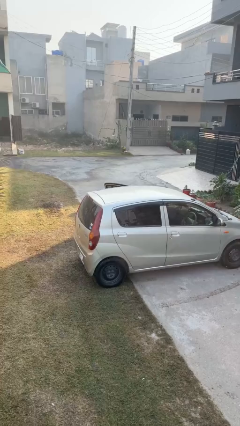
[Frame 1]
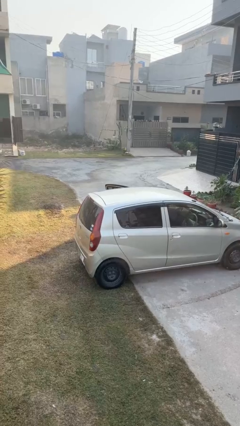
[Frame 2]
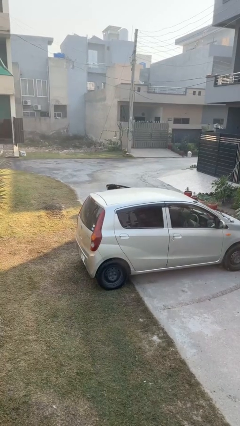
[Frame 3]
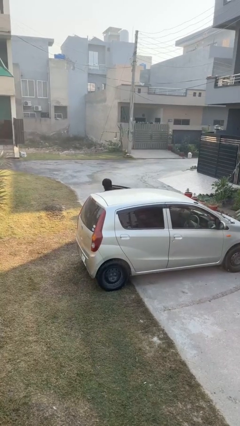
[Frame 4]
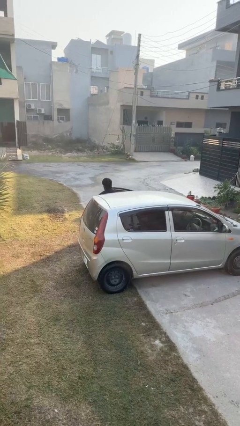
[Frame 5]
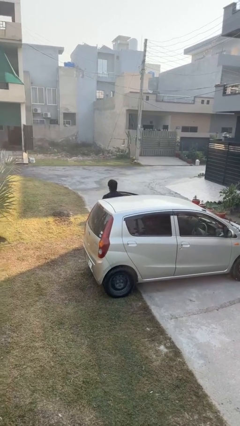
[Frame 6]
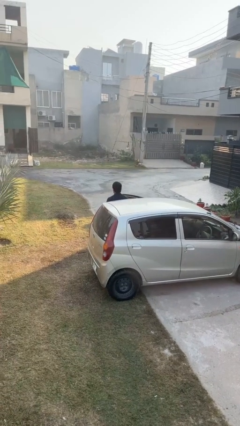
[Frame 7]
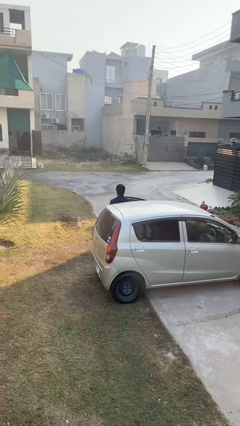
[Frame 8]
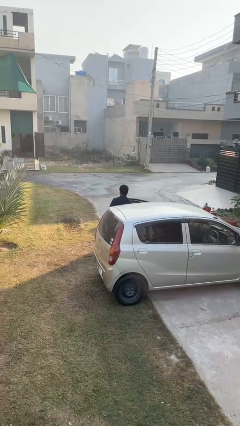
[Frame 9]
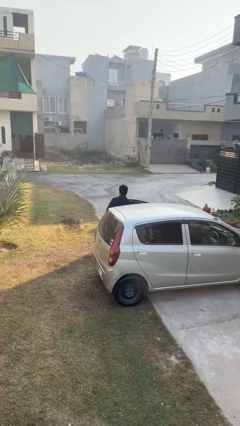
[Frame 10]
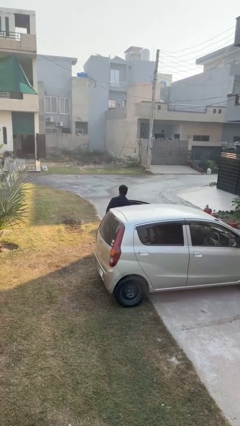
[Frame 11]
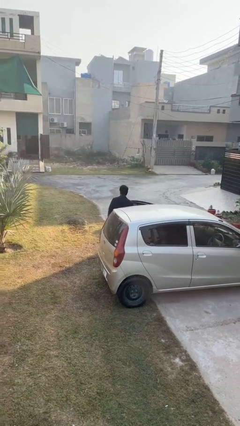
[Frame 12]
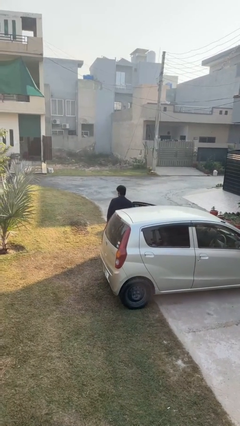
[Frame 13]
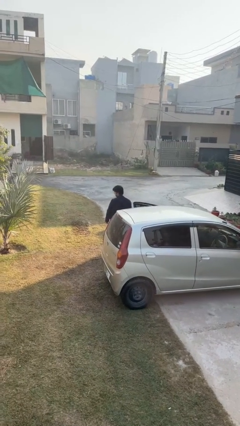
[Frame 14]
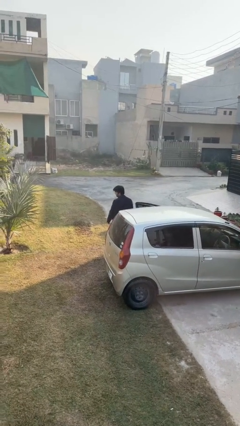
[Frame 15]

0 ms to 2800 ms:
person exits car

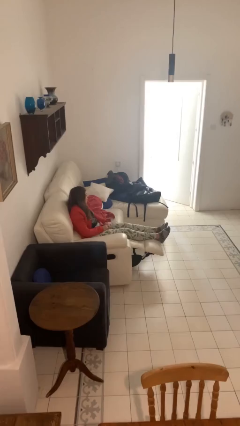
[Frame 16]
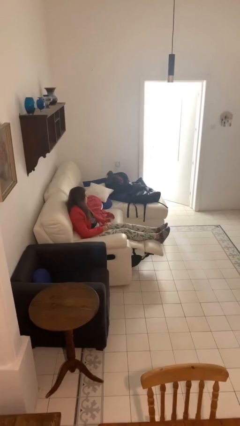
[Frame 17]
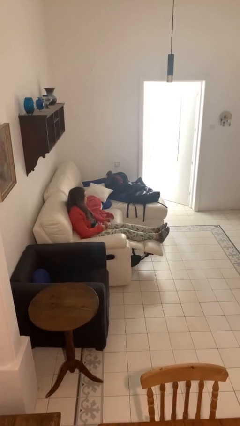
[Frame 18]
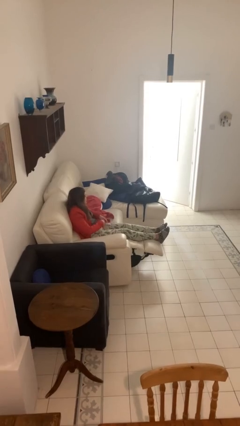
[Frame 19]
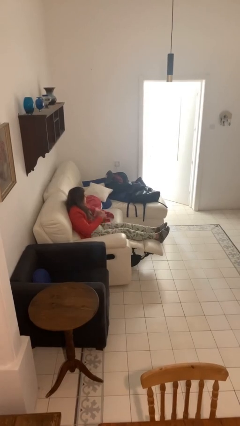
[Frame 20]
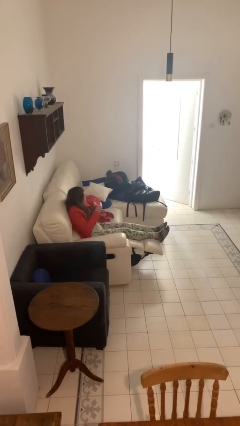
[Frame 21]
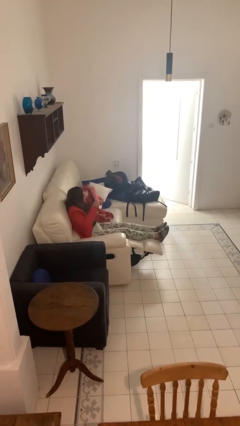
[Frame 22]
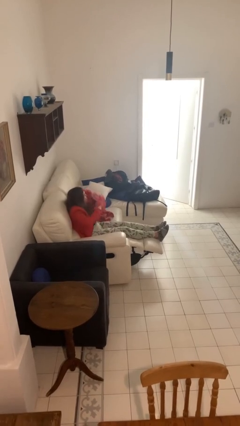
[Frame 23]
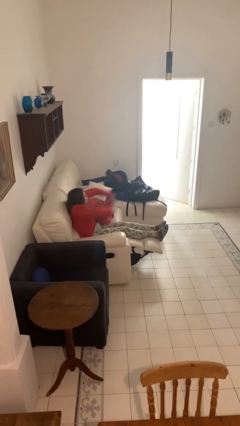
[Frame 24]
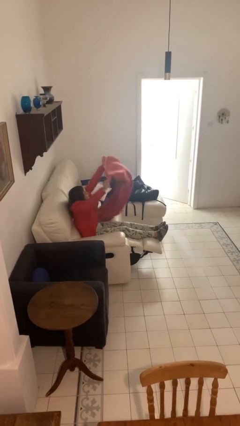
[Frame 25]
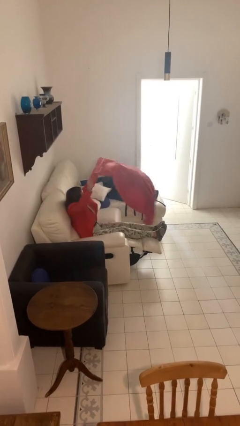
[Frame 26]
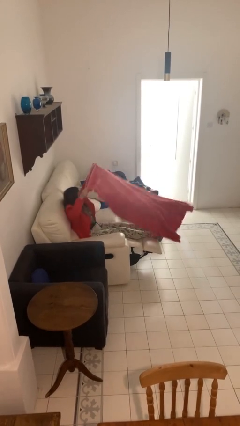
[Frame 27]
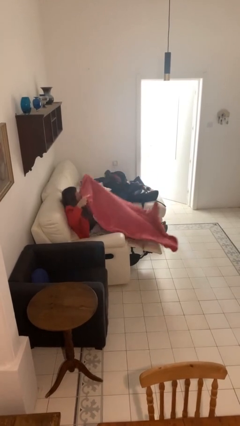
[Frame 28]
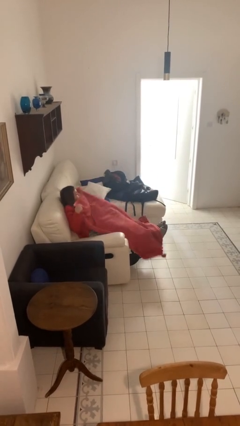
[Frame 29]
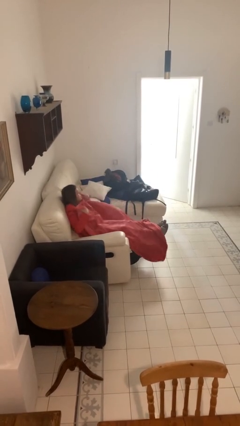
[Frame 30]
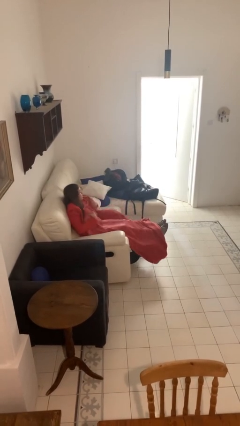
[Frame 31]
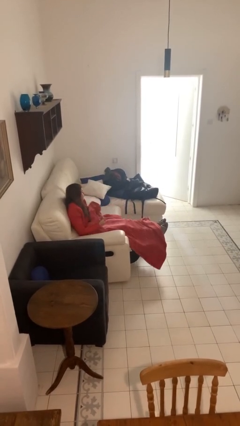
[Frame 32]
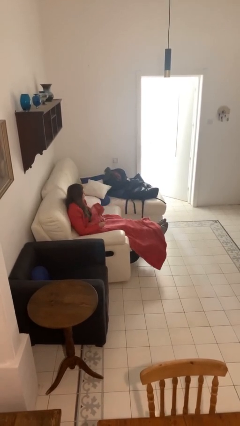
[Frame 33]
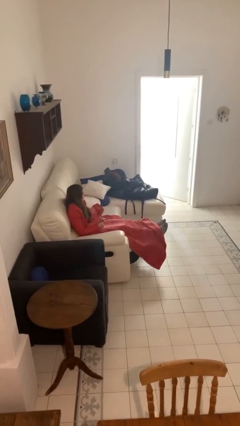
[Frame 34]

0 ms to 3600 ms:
person covers with blanket

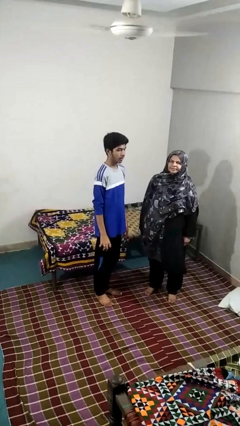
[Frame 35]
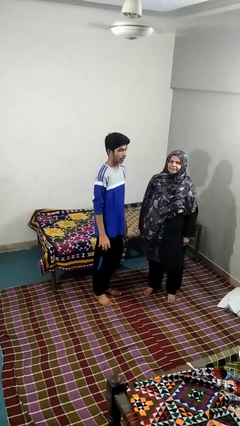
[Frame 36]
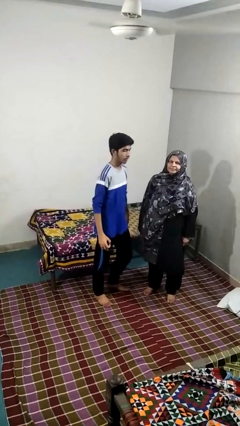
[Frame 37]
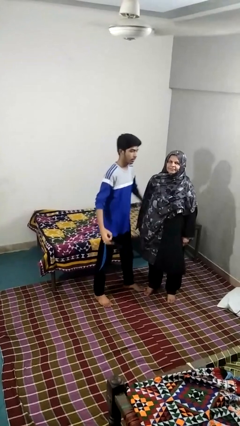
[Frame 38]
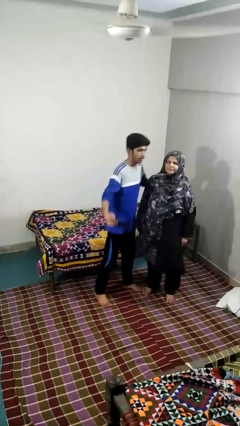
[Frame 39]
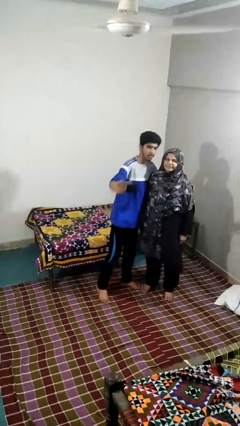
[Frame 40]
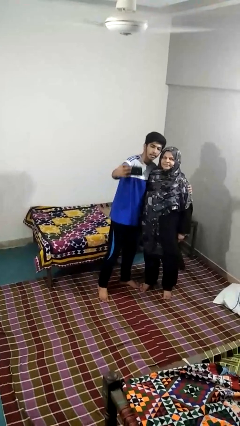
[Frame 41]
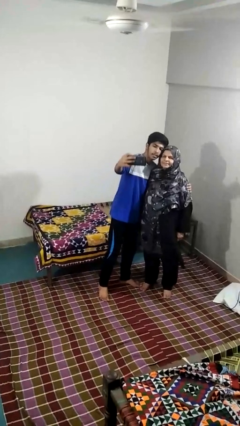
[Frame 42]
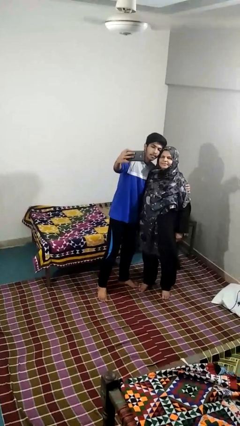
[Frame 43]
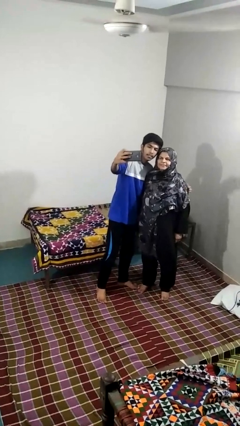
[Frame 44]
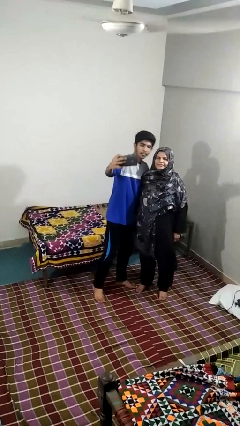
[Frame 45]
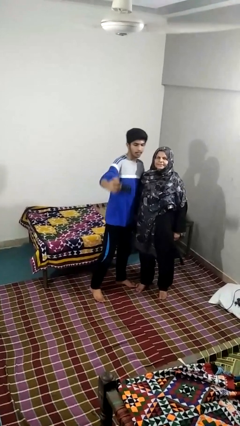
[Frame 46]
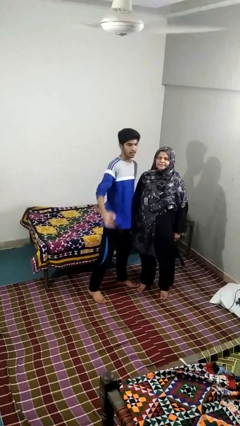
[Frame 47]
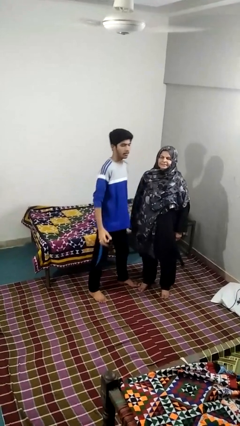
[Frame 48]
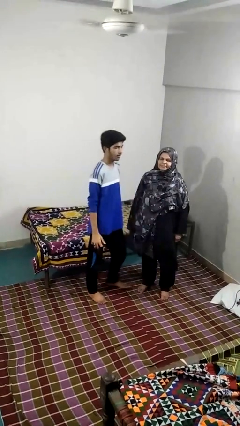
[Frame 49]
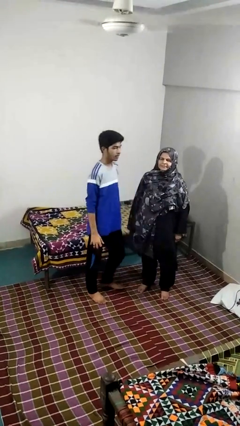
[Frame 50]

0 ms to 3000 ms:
person takes selfie with person

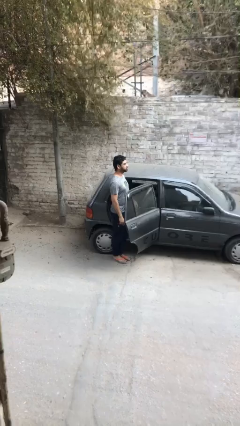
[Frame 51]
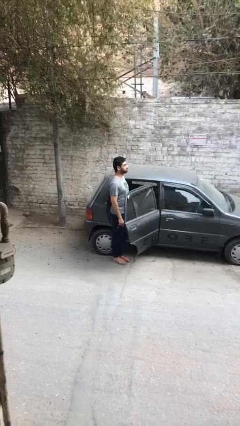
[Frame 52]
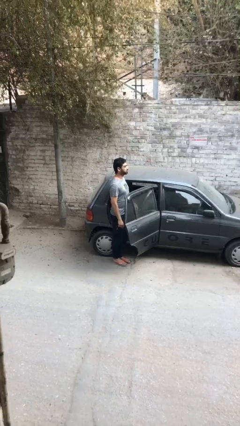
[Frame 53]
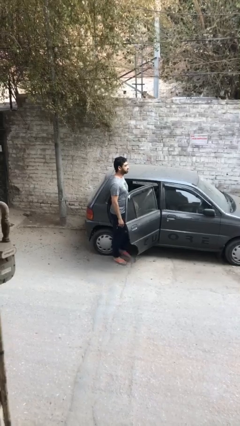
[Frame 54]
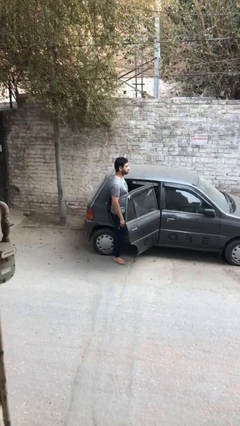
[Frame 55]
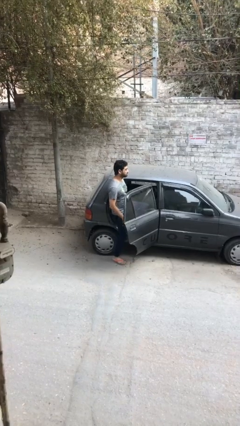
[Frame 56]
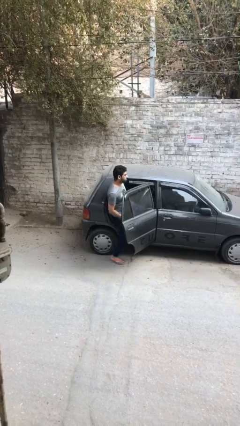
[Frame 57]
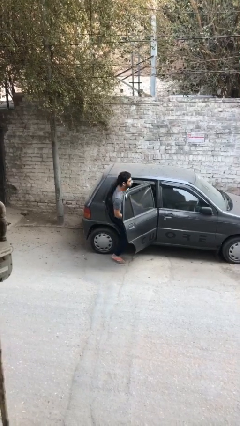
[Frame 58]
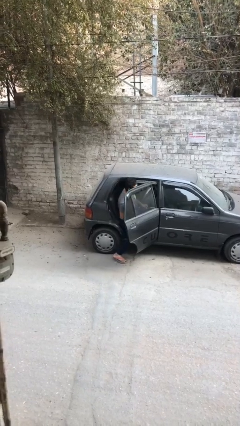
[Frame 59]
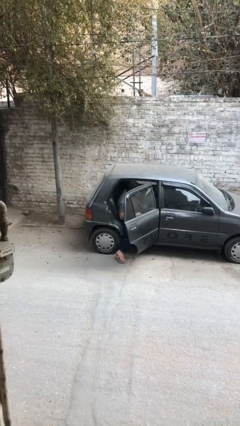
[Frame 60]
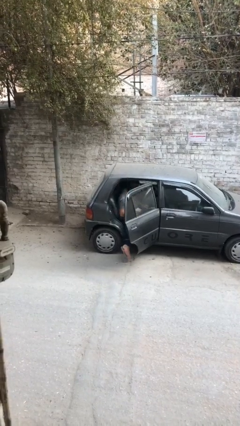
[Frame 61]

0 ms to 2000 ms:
person enters car

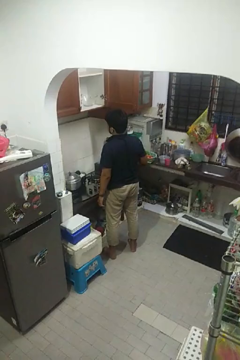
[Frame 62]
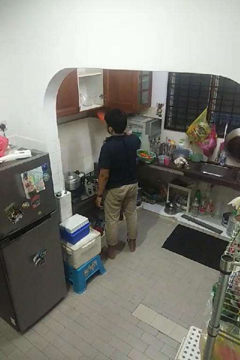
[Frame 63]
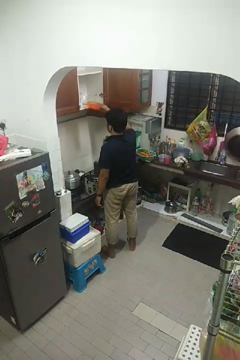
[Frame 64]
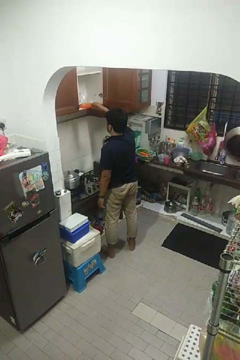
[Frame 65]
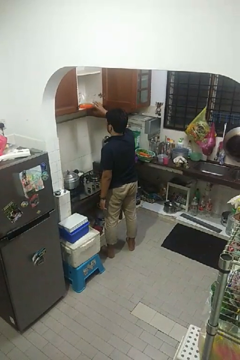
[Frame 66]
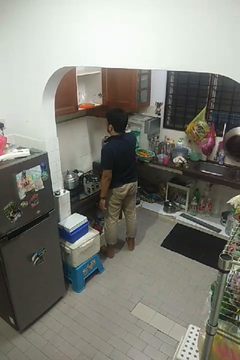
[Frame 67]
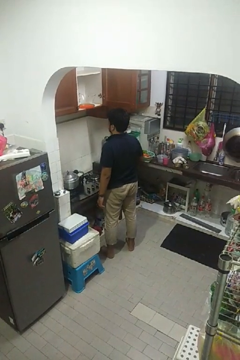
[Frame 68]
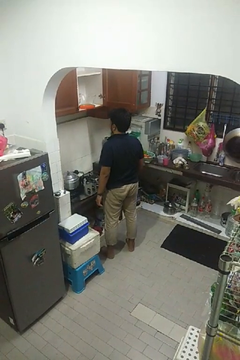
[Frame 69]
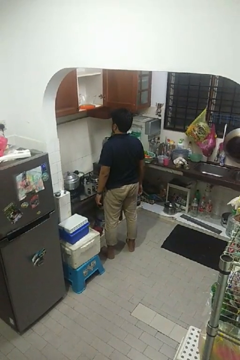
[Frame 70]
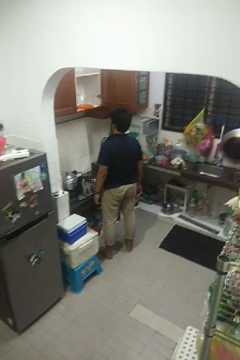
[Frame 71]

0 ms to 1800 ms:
person puts object in cabinet

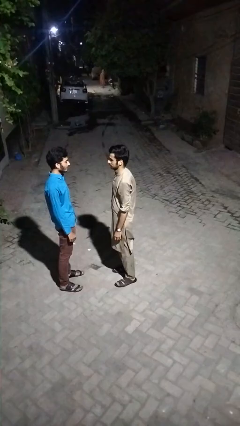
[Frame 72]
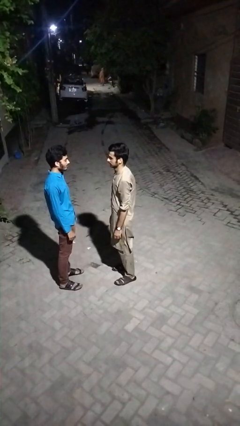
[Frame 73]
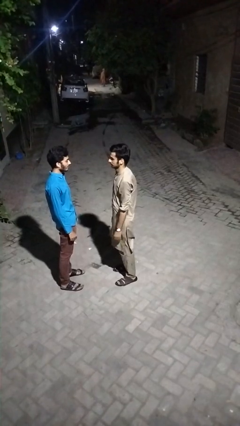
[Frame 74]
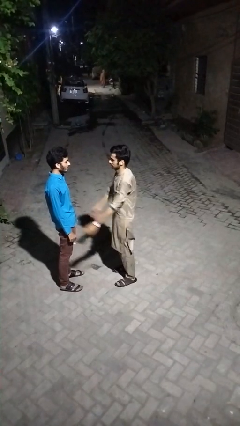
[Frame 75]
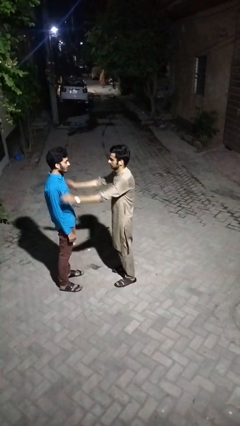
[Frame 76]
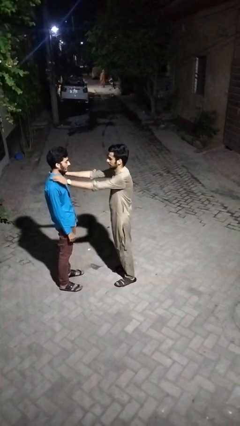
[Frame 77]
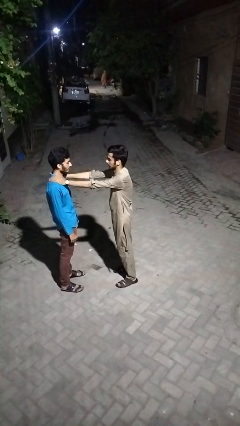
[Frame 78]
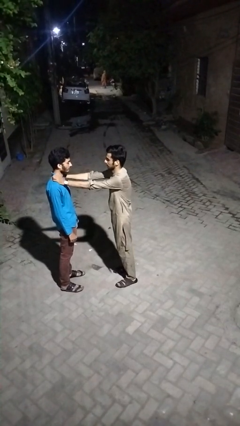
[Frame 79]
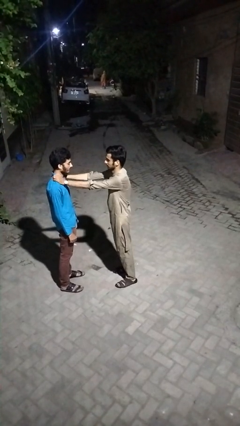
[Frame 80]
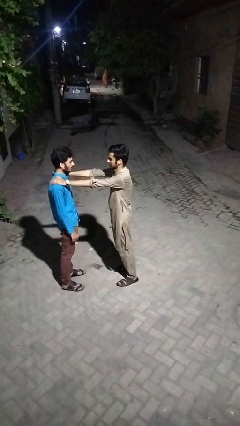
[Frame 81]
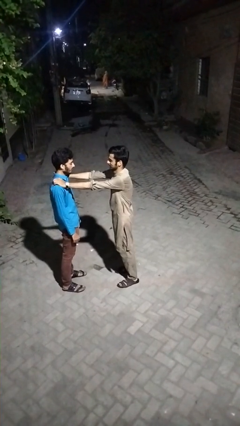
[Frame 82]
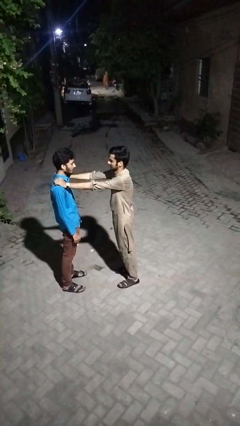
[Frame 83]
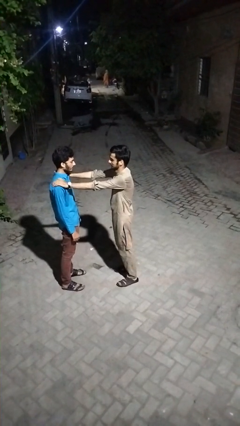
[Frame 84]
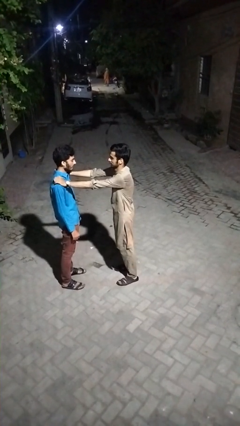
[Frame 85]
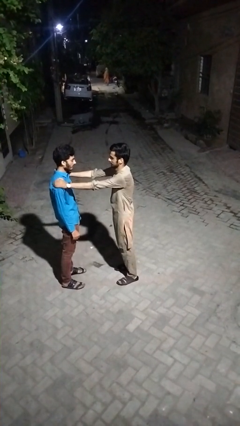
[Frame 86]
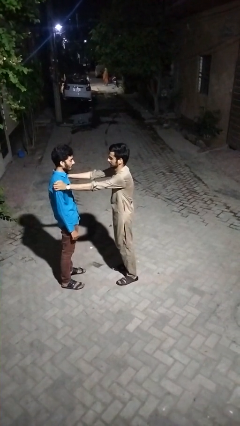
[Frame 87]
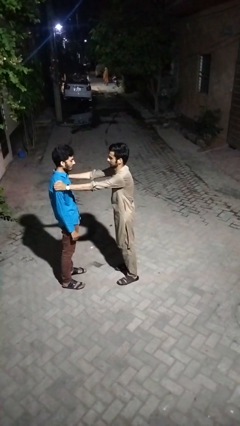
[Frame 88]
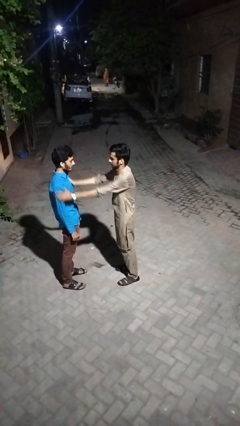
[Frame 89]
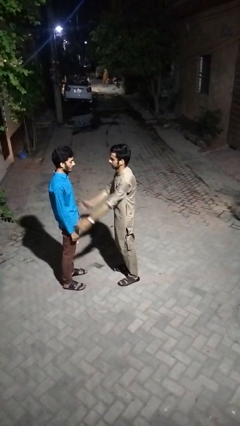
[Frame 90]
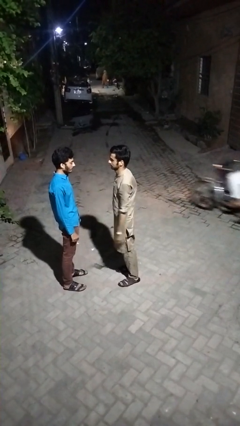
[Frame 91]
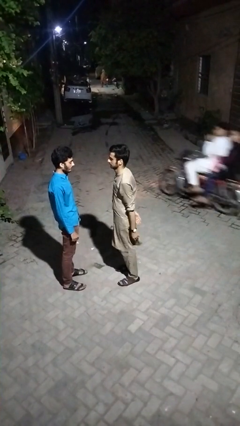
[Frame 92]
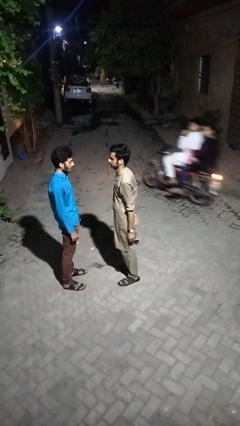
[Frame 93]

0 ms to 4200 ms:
person pounds shoulders of person
